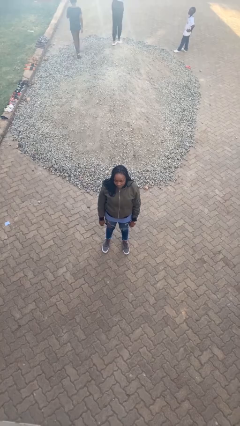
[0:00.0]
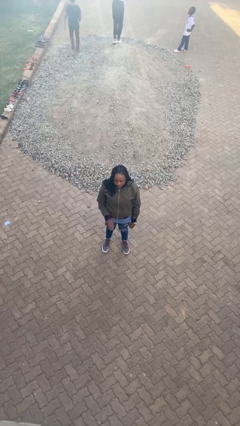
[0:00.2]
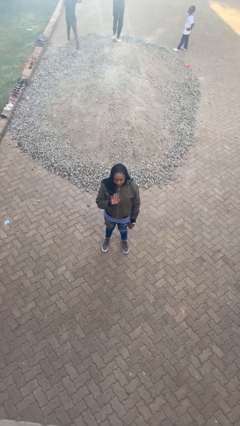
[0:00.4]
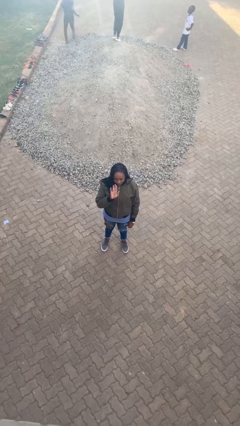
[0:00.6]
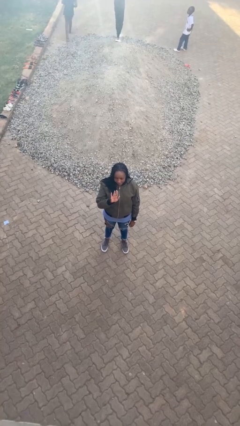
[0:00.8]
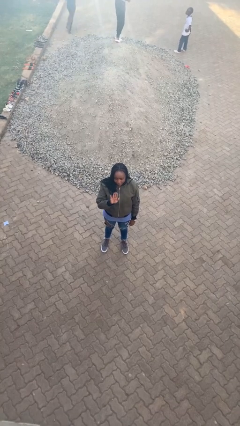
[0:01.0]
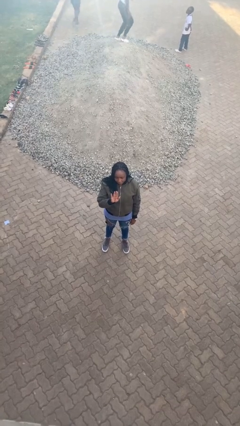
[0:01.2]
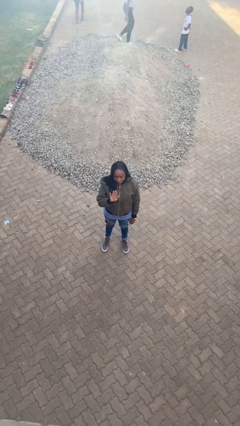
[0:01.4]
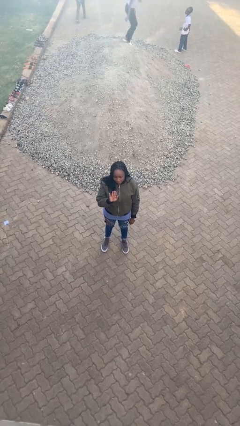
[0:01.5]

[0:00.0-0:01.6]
person gestures stop

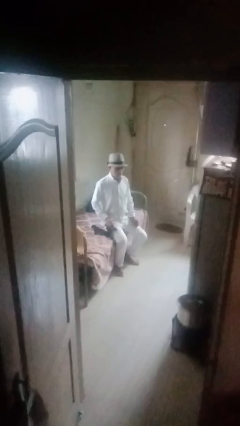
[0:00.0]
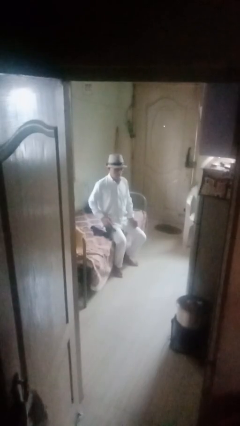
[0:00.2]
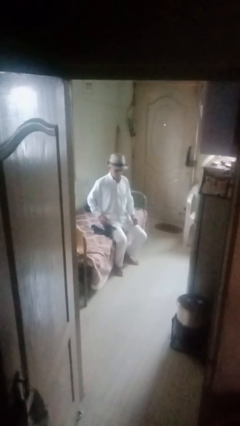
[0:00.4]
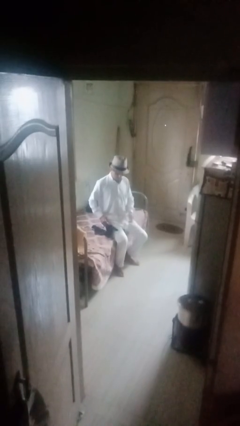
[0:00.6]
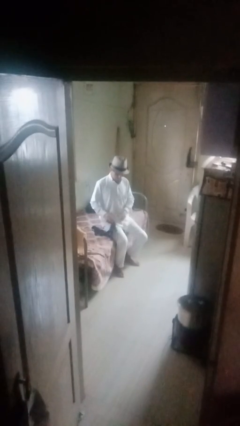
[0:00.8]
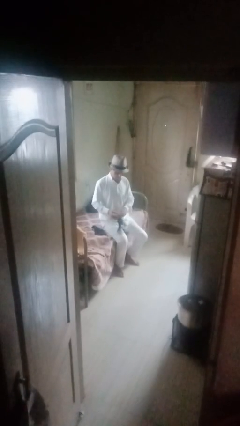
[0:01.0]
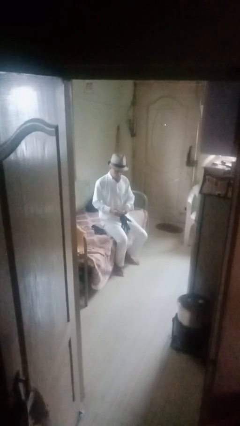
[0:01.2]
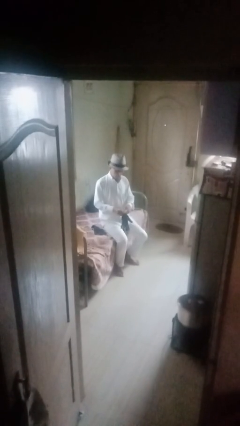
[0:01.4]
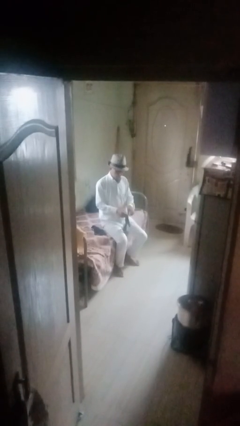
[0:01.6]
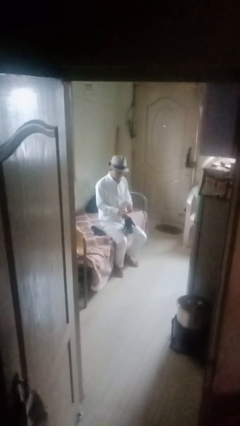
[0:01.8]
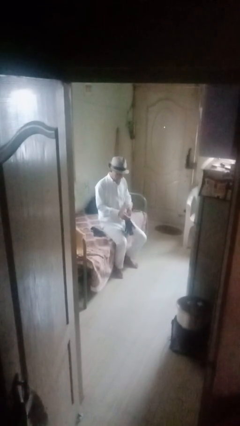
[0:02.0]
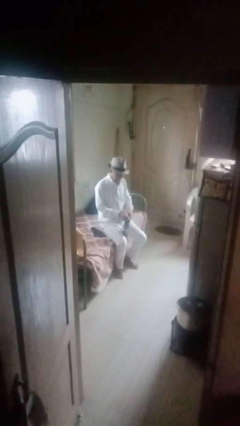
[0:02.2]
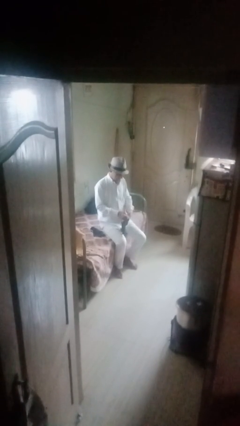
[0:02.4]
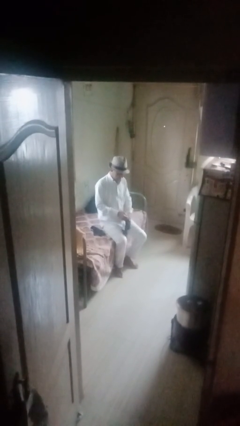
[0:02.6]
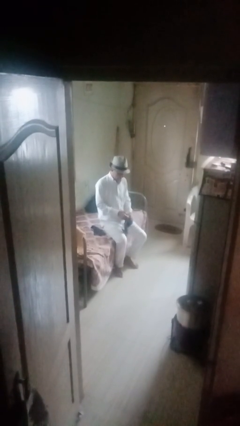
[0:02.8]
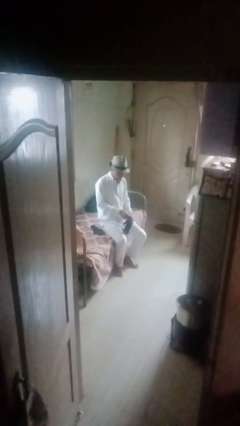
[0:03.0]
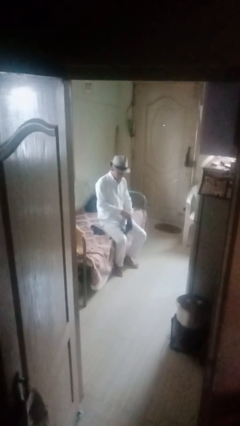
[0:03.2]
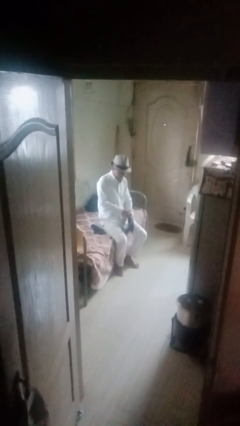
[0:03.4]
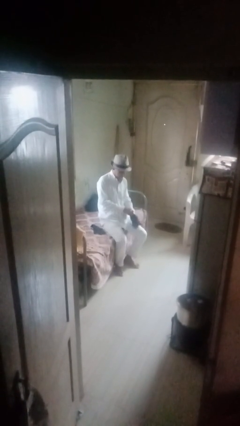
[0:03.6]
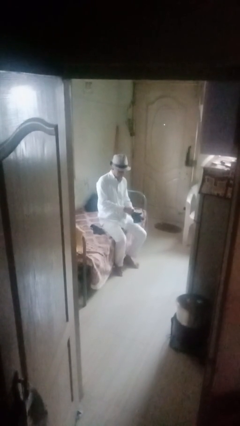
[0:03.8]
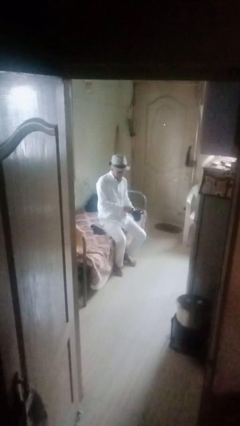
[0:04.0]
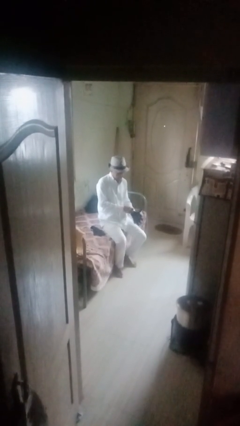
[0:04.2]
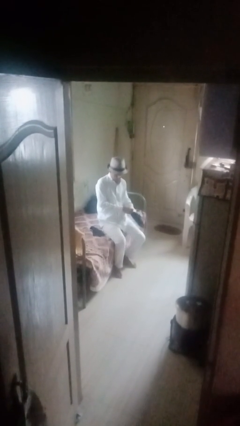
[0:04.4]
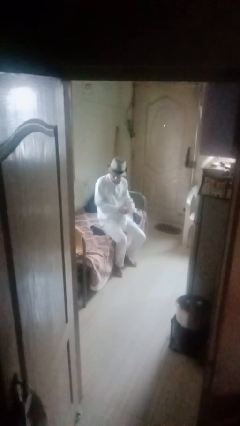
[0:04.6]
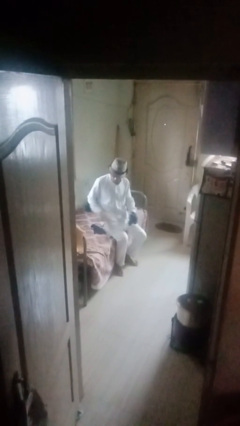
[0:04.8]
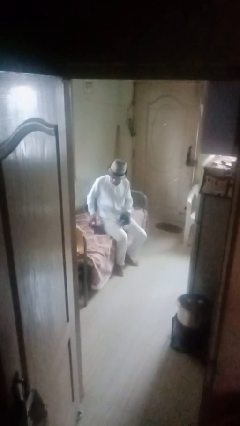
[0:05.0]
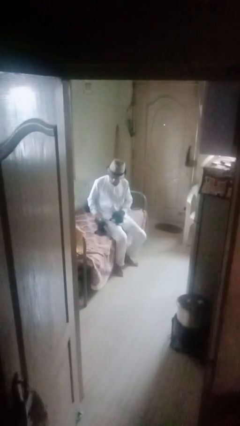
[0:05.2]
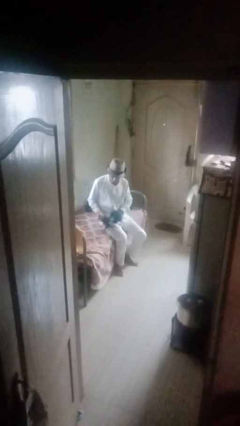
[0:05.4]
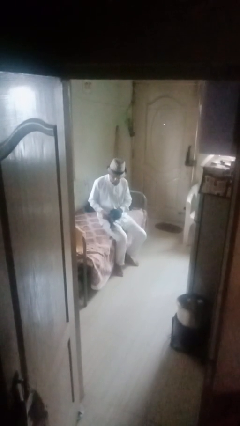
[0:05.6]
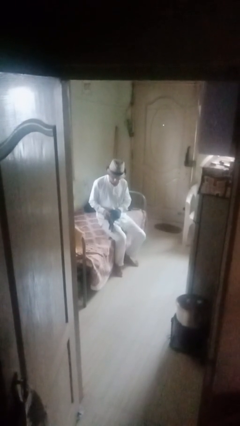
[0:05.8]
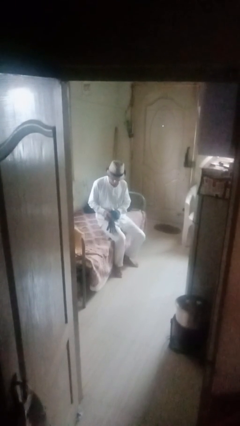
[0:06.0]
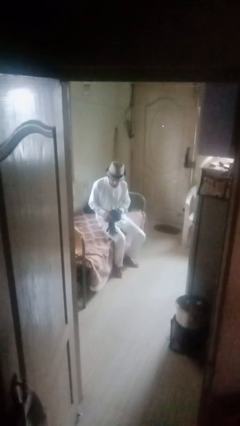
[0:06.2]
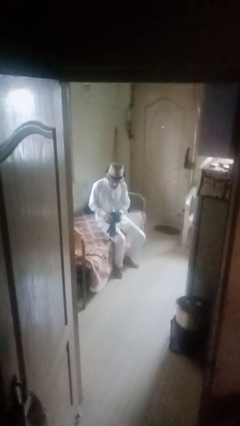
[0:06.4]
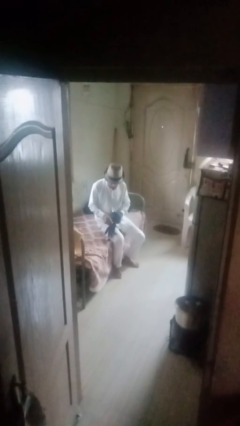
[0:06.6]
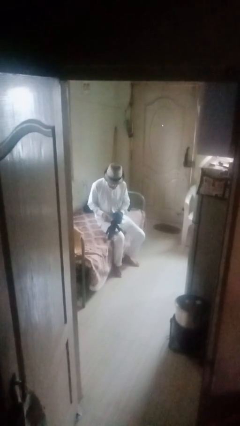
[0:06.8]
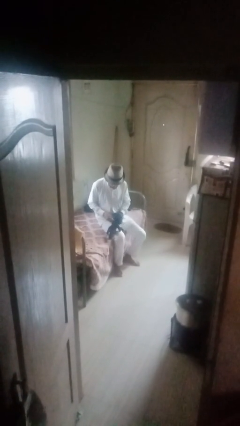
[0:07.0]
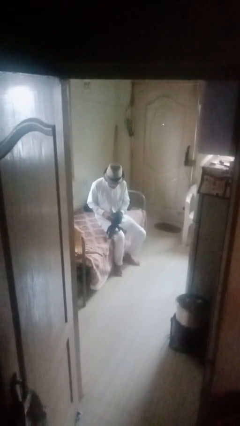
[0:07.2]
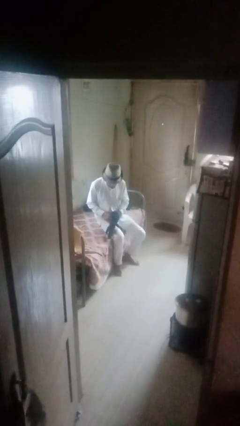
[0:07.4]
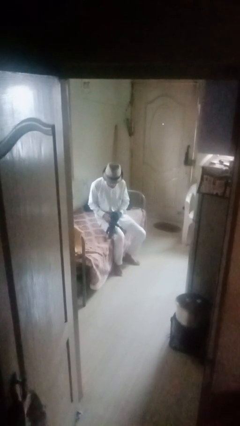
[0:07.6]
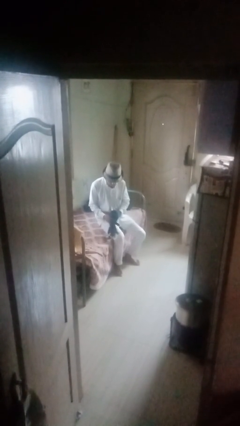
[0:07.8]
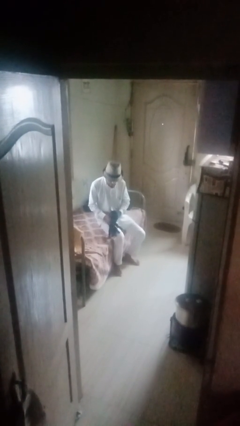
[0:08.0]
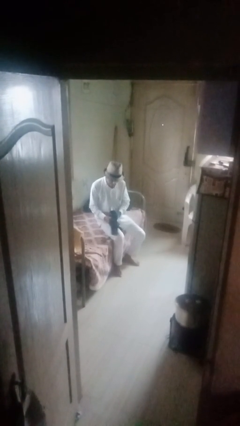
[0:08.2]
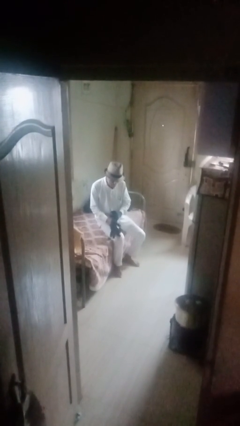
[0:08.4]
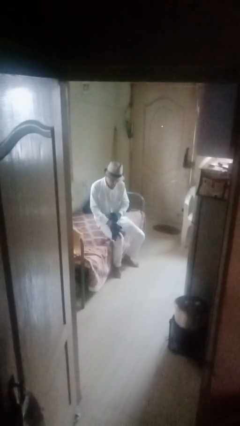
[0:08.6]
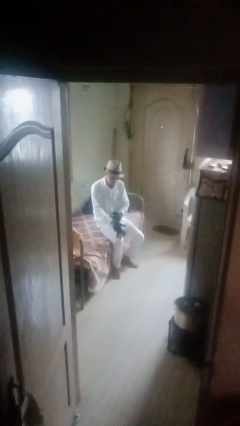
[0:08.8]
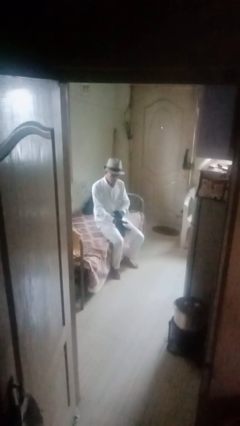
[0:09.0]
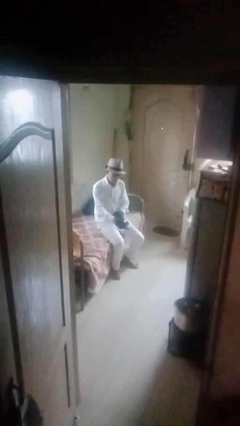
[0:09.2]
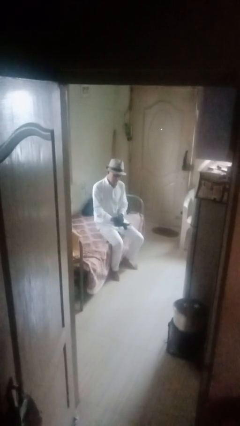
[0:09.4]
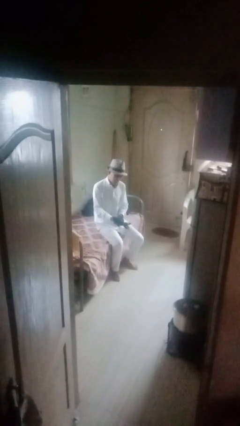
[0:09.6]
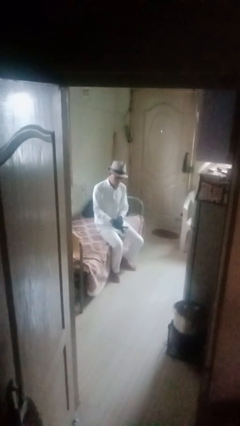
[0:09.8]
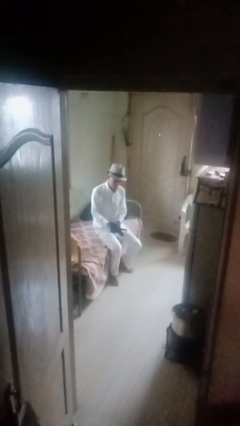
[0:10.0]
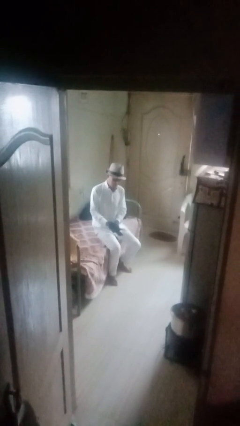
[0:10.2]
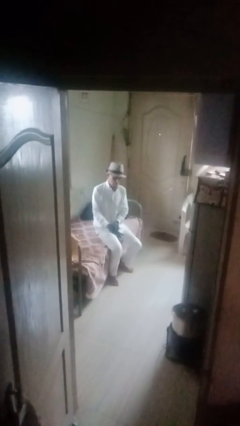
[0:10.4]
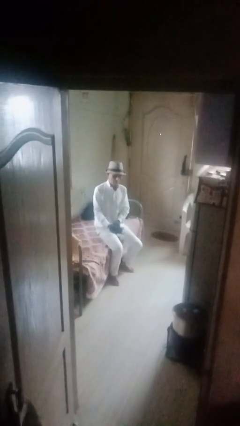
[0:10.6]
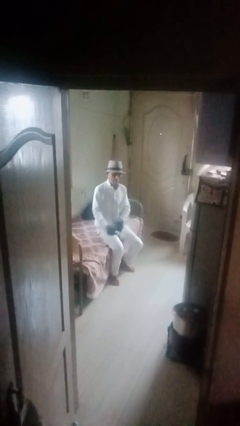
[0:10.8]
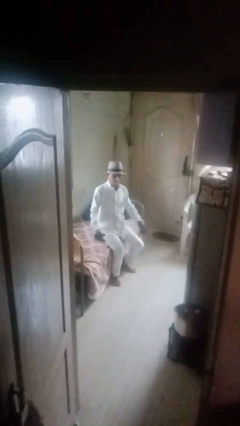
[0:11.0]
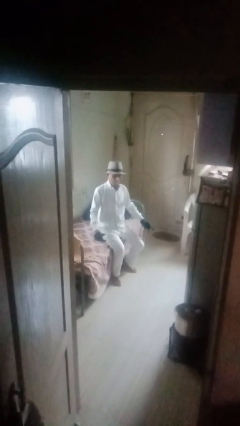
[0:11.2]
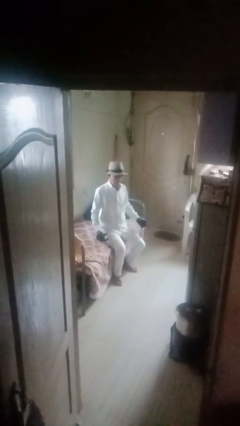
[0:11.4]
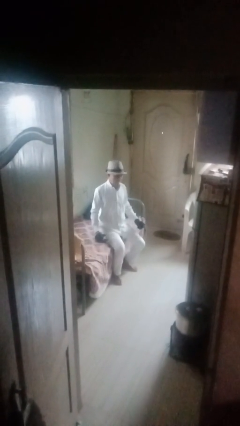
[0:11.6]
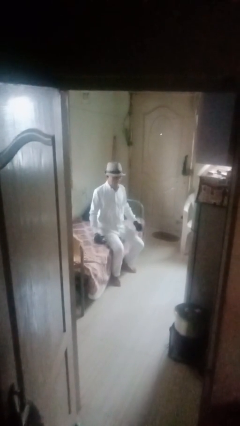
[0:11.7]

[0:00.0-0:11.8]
person puts on gloves

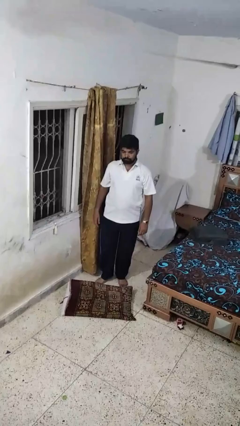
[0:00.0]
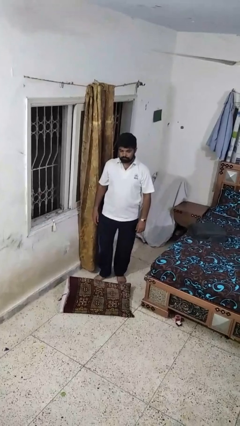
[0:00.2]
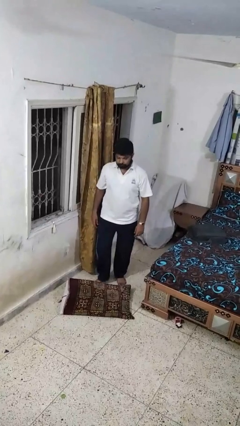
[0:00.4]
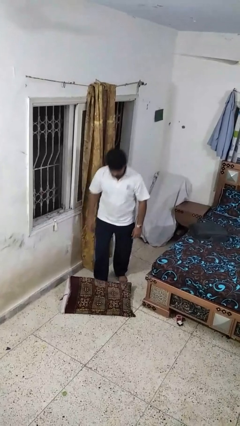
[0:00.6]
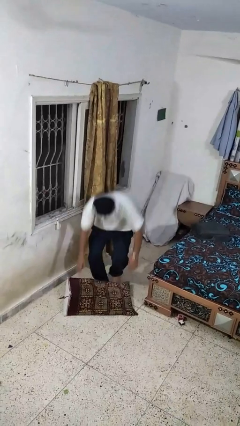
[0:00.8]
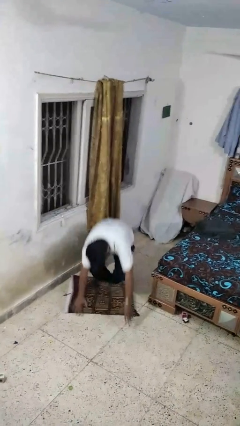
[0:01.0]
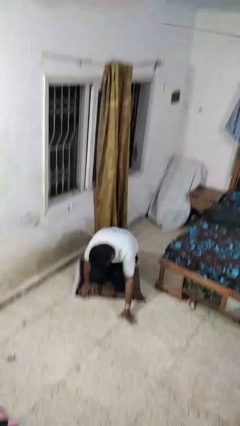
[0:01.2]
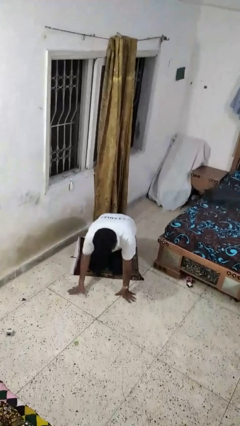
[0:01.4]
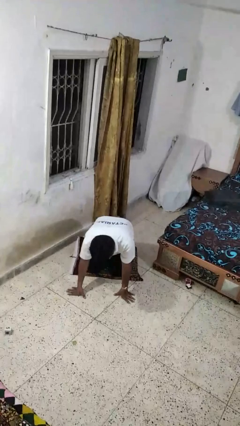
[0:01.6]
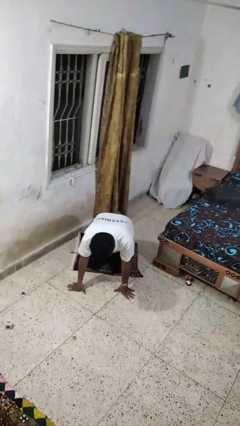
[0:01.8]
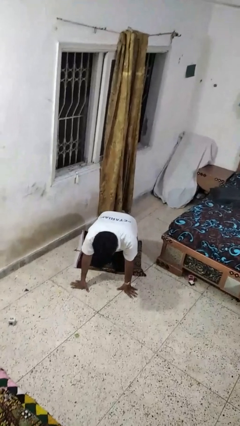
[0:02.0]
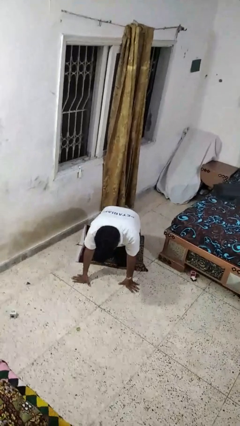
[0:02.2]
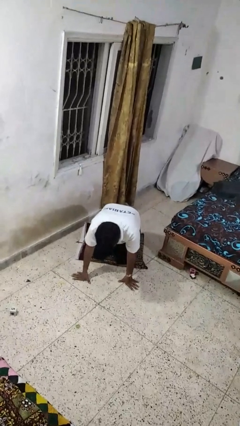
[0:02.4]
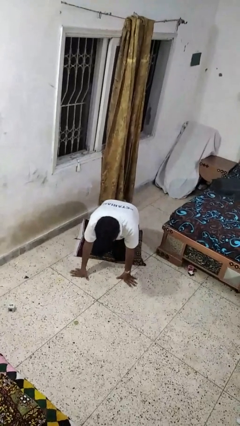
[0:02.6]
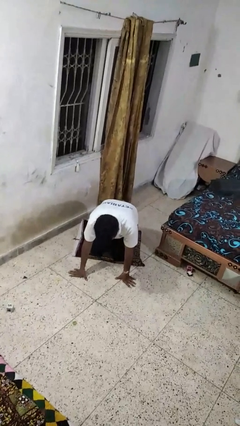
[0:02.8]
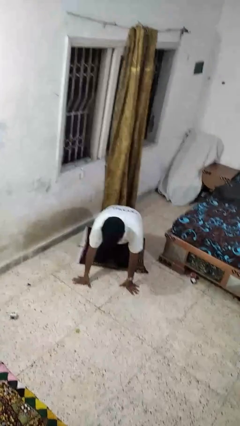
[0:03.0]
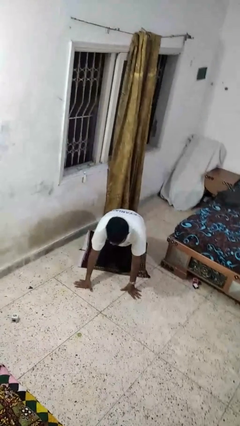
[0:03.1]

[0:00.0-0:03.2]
person trips on object on floor

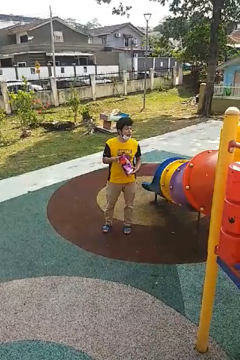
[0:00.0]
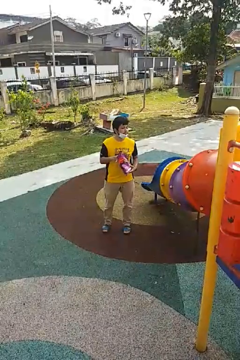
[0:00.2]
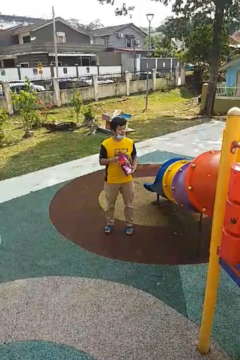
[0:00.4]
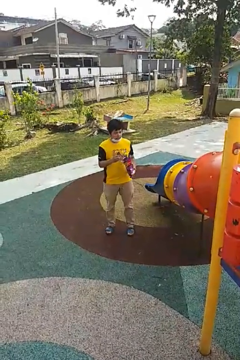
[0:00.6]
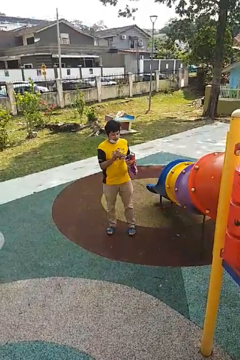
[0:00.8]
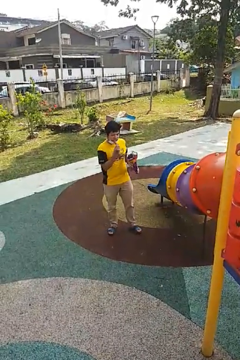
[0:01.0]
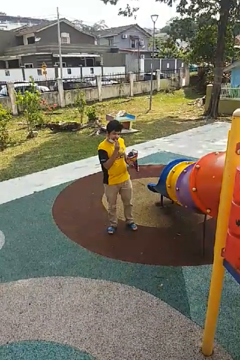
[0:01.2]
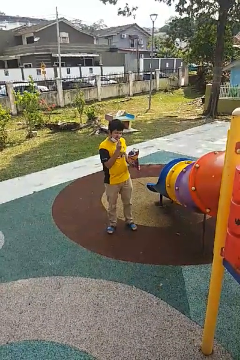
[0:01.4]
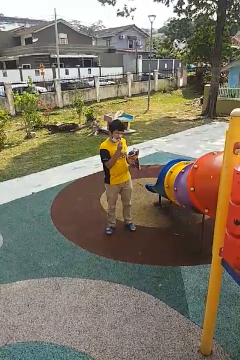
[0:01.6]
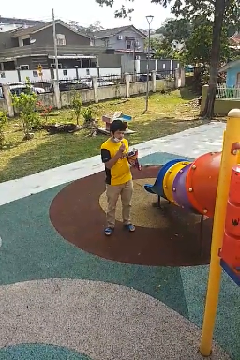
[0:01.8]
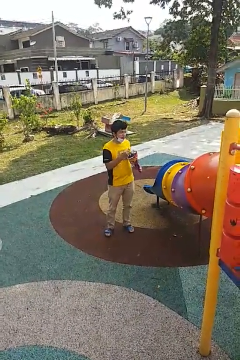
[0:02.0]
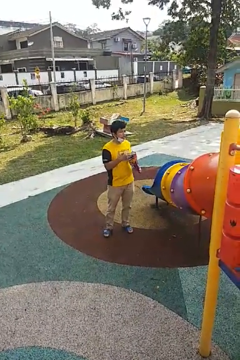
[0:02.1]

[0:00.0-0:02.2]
person eats snack from bag
